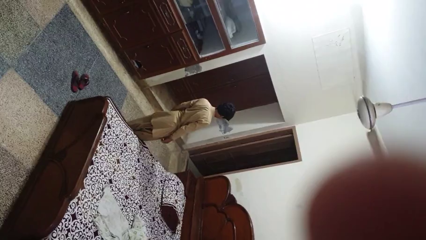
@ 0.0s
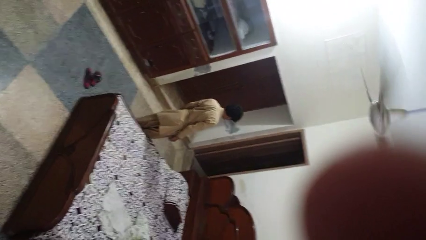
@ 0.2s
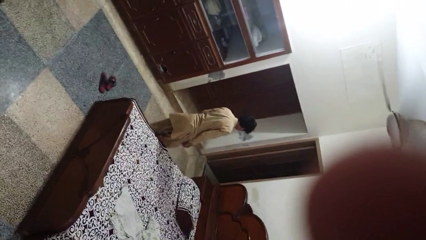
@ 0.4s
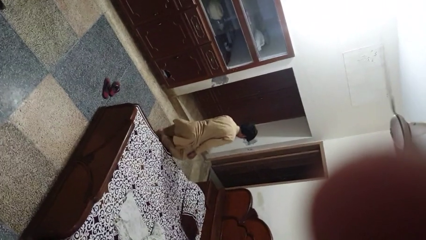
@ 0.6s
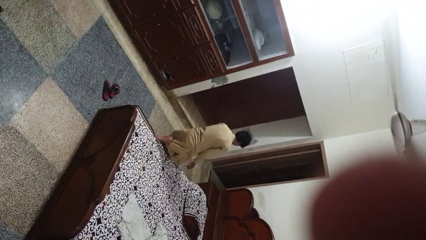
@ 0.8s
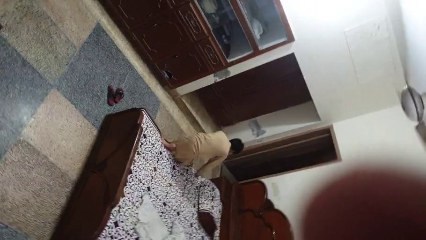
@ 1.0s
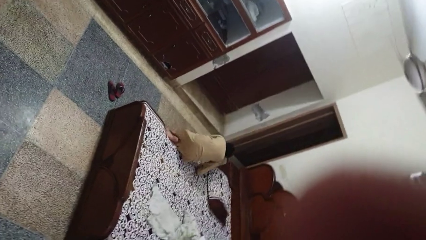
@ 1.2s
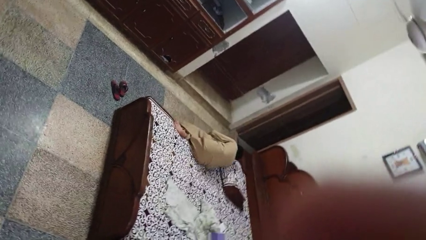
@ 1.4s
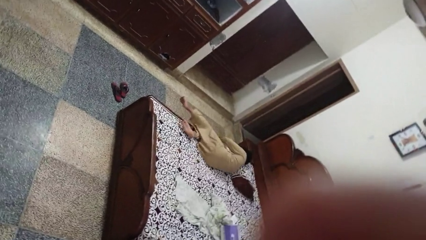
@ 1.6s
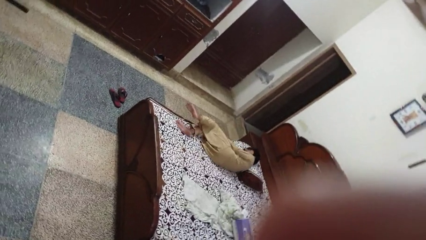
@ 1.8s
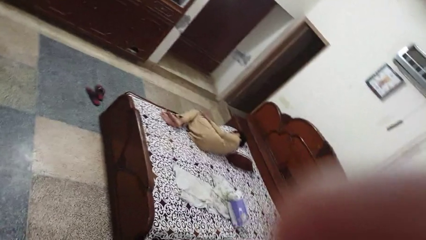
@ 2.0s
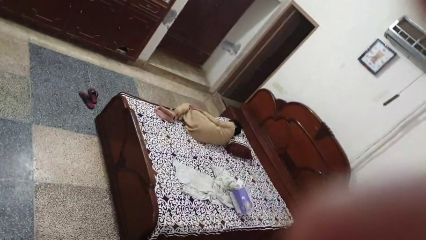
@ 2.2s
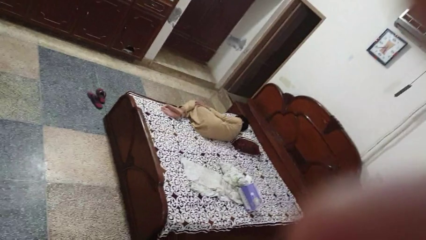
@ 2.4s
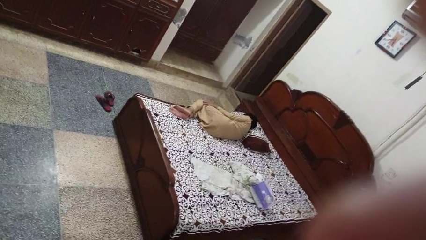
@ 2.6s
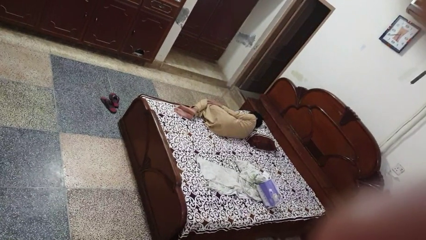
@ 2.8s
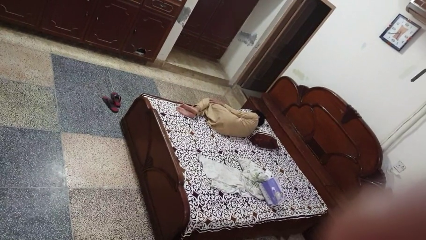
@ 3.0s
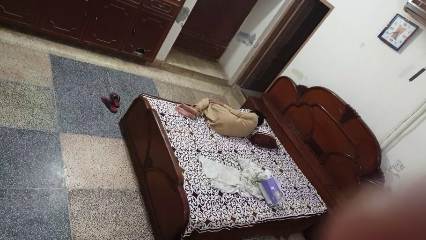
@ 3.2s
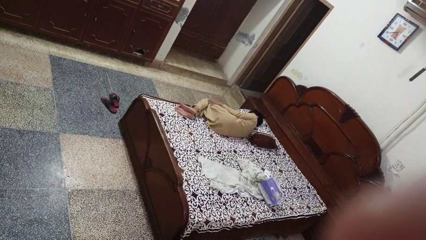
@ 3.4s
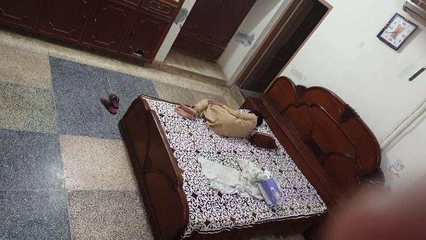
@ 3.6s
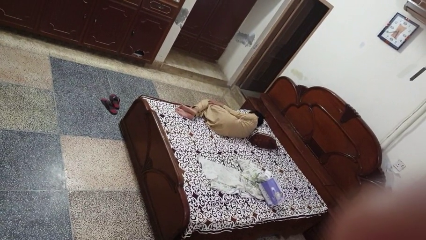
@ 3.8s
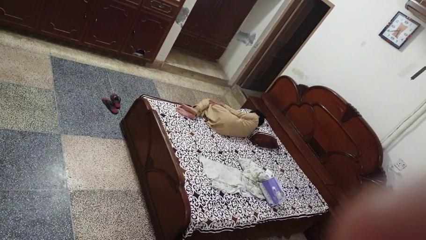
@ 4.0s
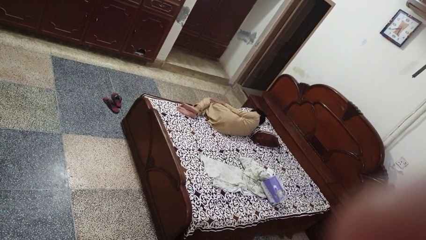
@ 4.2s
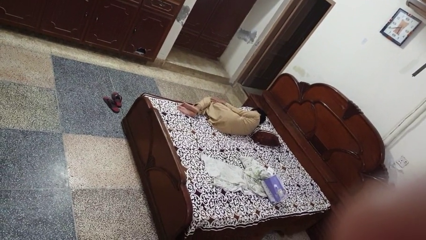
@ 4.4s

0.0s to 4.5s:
person lies down on bed

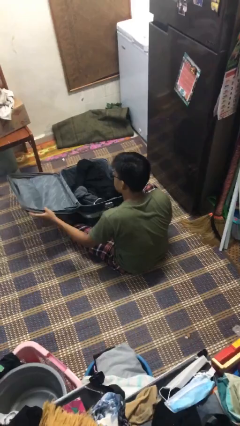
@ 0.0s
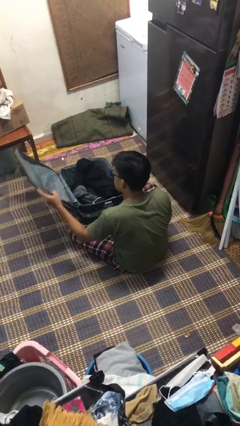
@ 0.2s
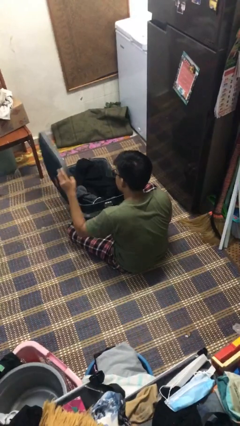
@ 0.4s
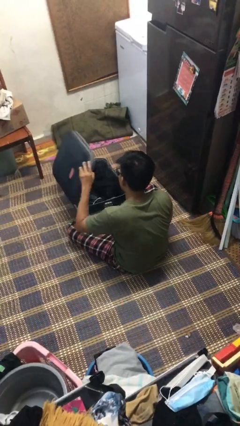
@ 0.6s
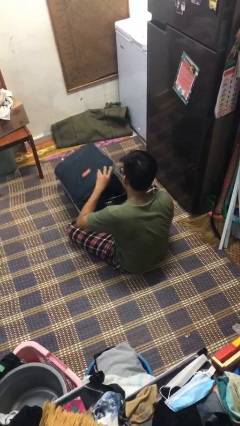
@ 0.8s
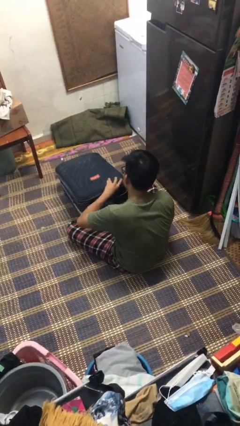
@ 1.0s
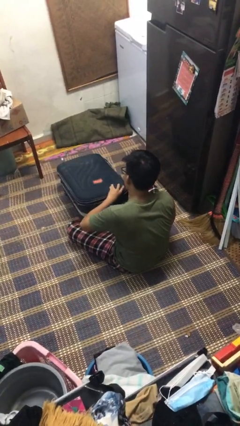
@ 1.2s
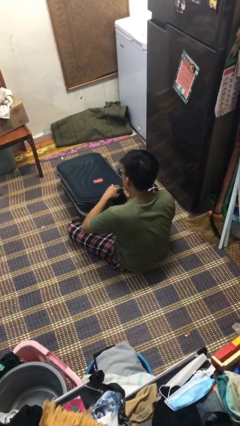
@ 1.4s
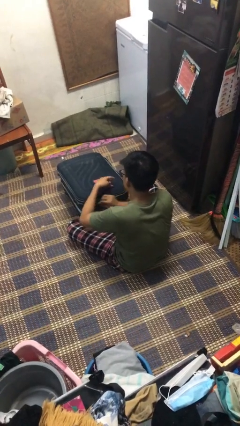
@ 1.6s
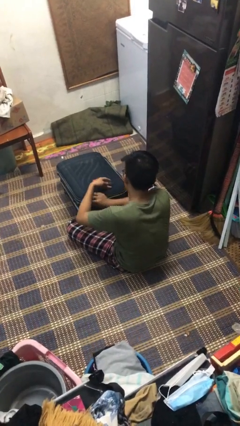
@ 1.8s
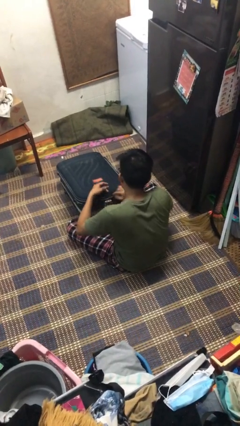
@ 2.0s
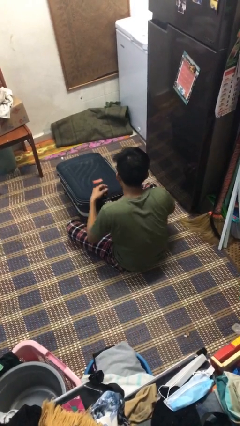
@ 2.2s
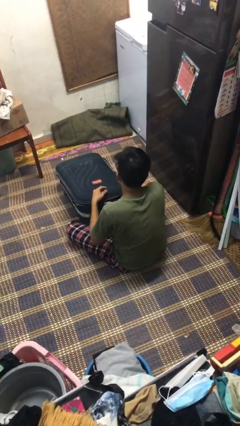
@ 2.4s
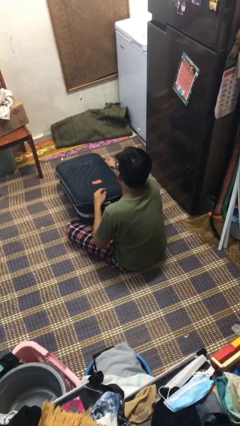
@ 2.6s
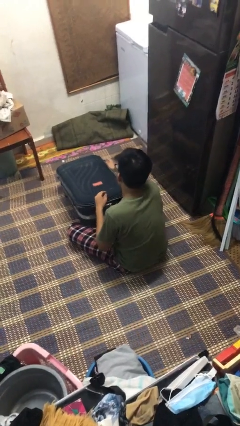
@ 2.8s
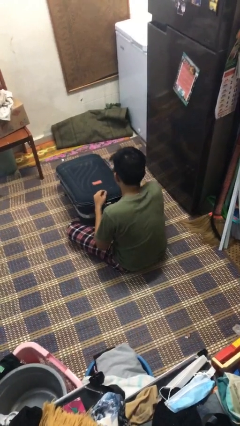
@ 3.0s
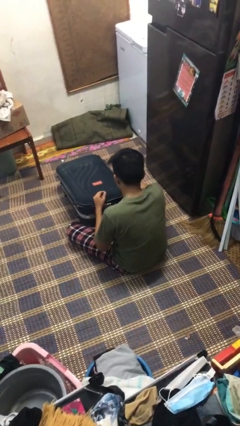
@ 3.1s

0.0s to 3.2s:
person closes suitcase

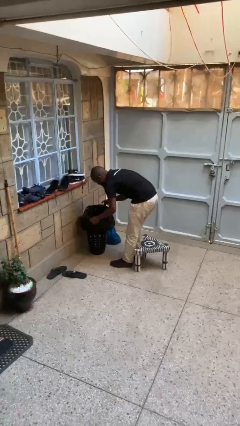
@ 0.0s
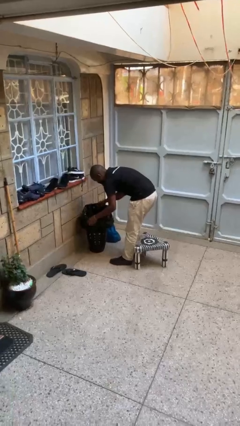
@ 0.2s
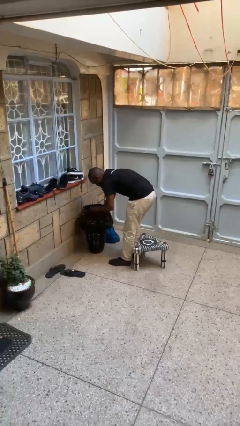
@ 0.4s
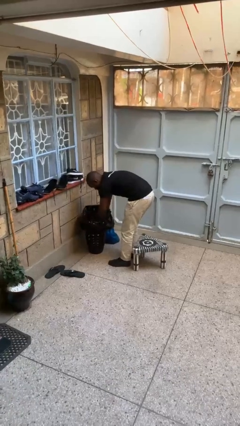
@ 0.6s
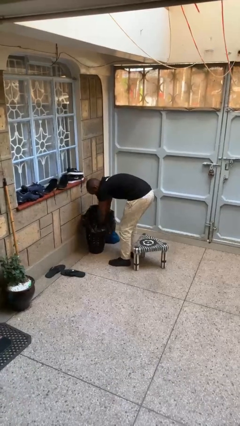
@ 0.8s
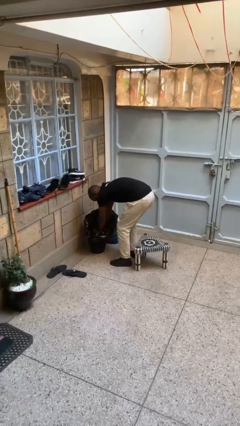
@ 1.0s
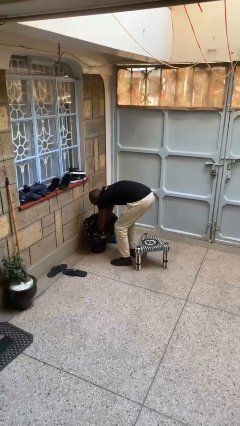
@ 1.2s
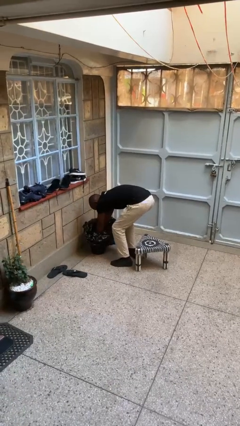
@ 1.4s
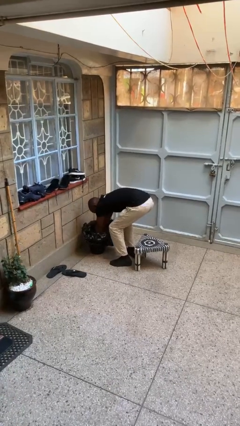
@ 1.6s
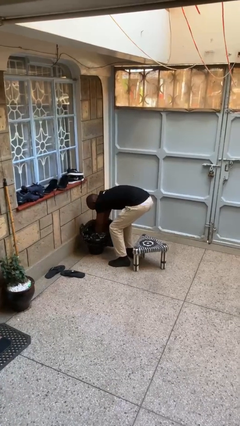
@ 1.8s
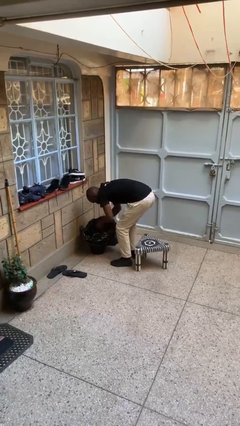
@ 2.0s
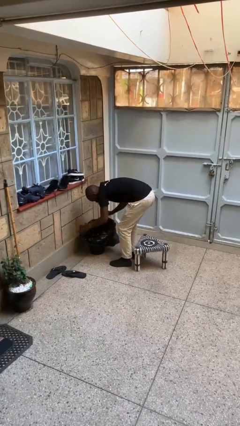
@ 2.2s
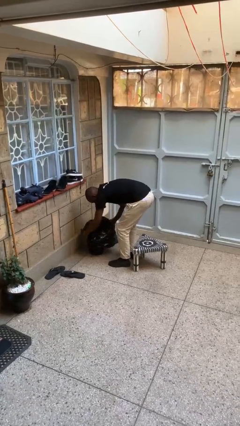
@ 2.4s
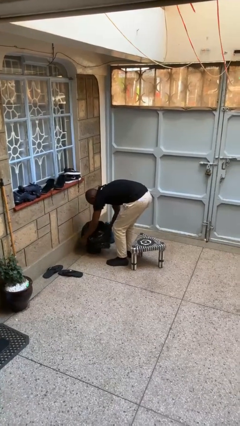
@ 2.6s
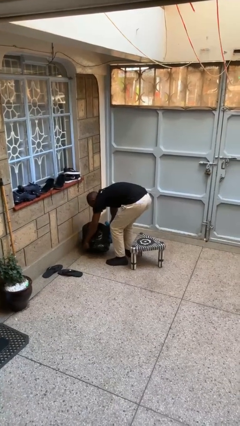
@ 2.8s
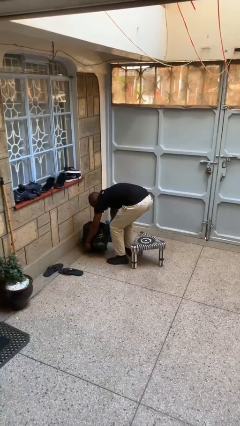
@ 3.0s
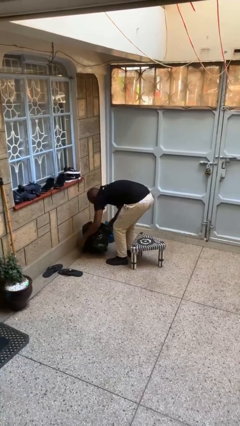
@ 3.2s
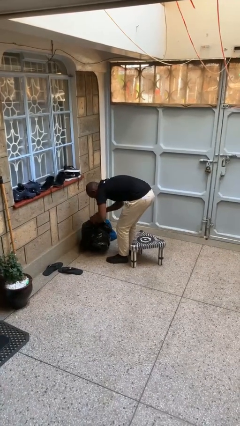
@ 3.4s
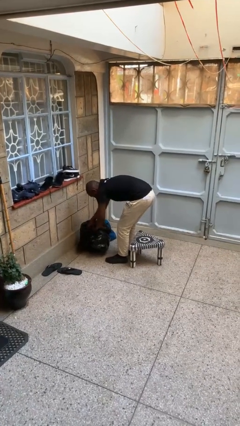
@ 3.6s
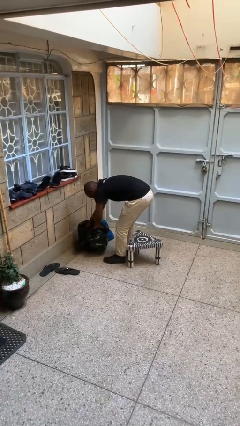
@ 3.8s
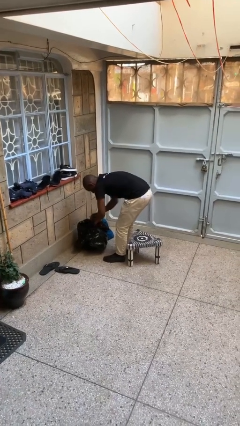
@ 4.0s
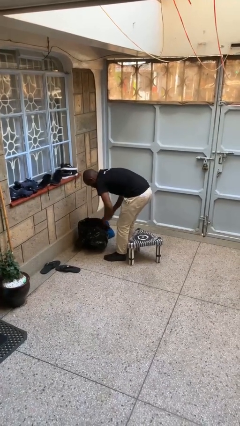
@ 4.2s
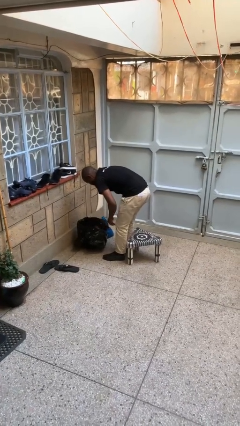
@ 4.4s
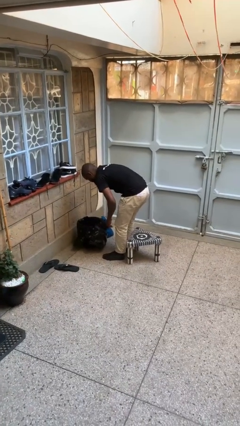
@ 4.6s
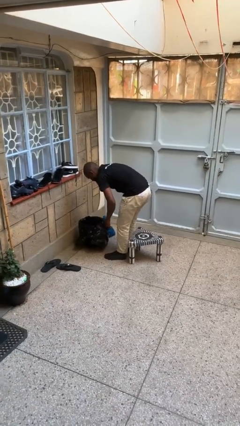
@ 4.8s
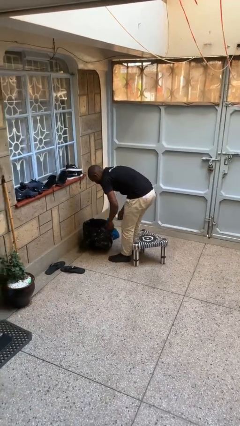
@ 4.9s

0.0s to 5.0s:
person inserts trashbag into trashcan

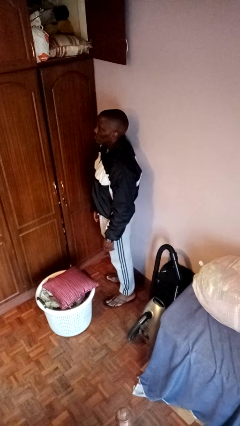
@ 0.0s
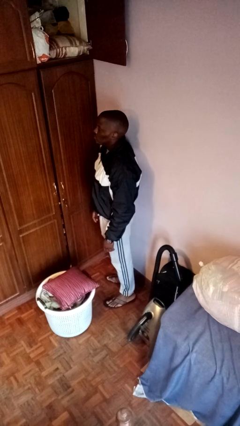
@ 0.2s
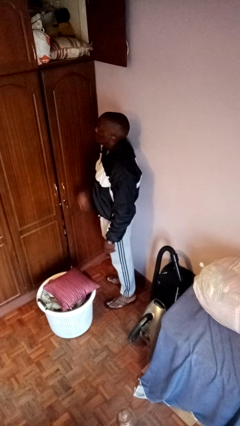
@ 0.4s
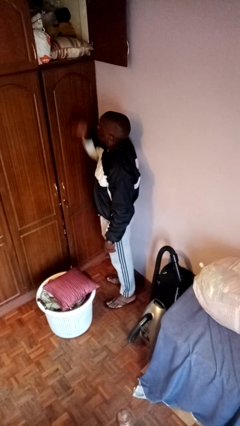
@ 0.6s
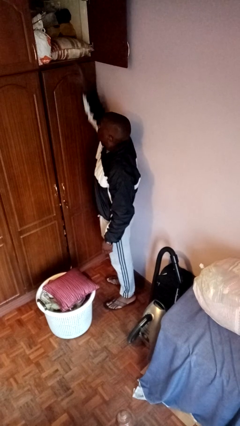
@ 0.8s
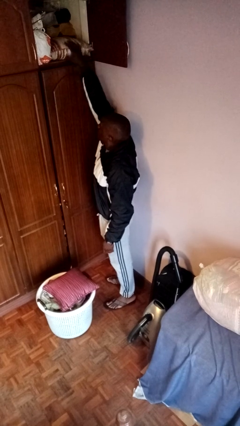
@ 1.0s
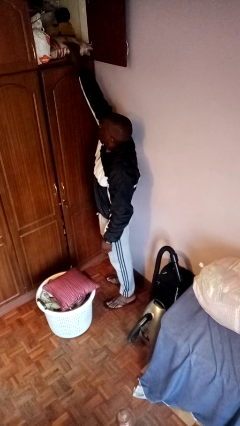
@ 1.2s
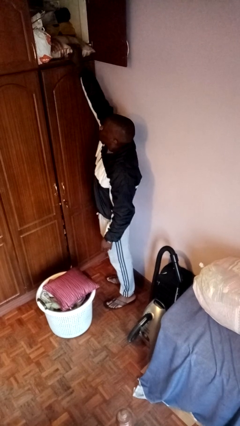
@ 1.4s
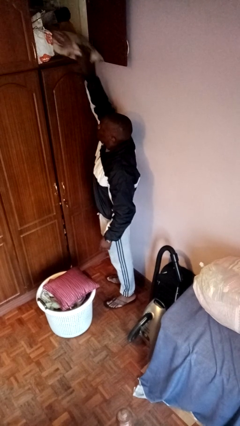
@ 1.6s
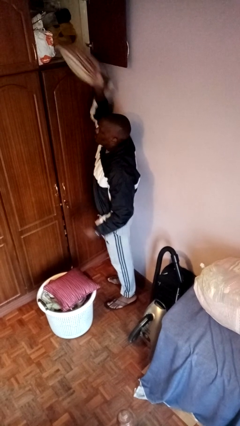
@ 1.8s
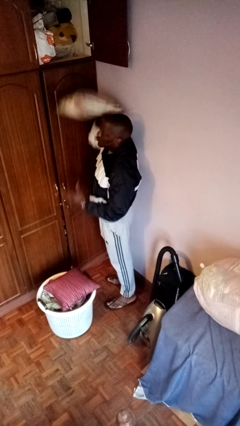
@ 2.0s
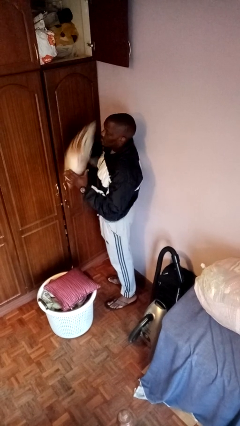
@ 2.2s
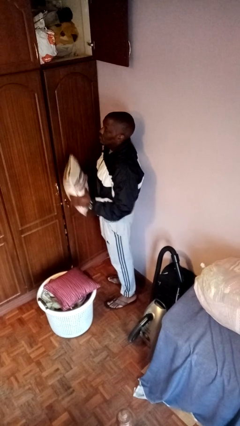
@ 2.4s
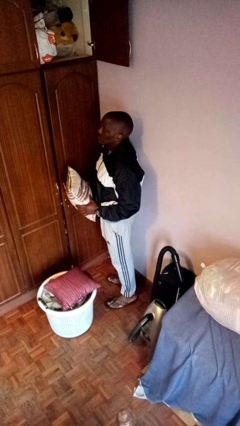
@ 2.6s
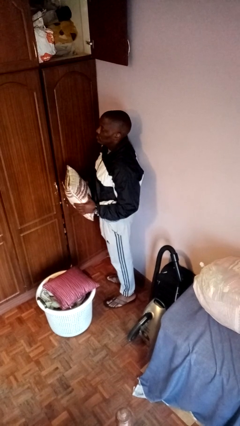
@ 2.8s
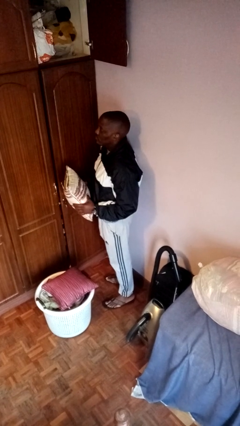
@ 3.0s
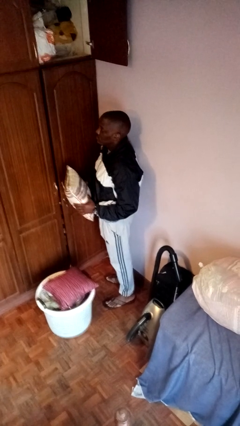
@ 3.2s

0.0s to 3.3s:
person picks up object from shelf

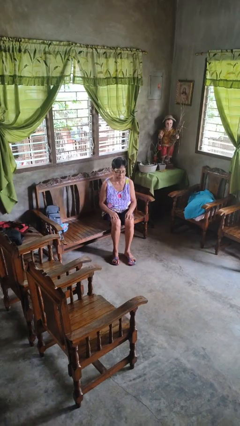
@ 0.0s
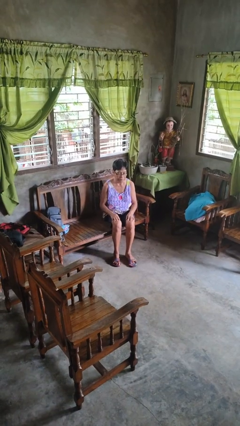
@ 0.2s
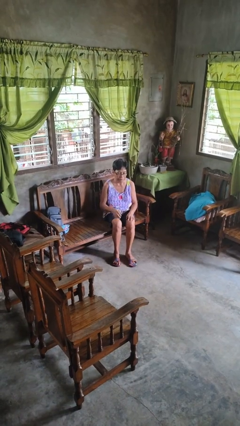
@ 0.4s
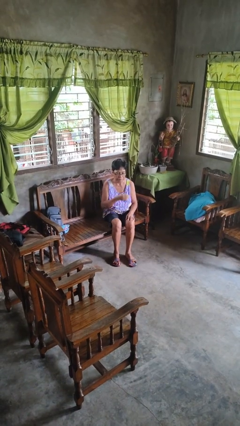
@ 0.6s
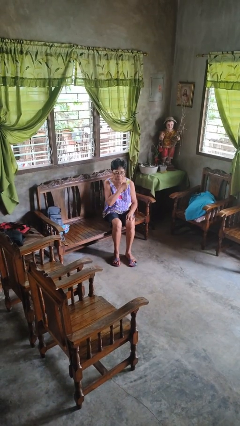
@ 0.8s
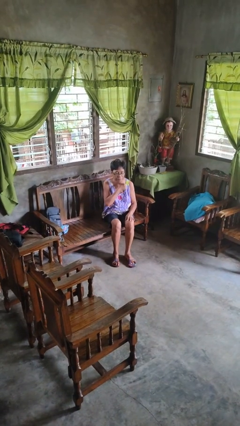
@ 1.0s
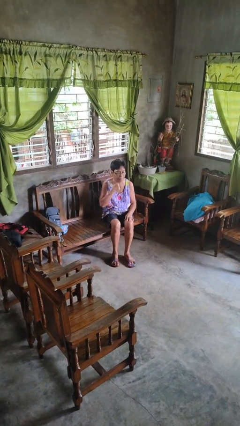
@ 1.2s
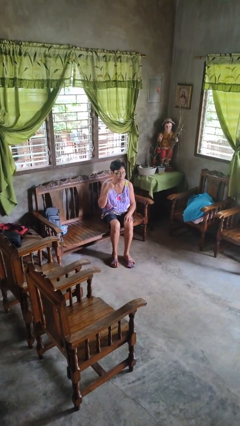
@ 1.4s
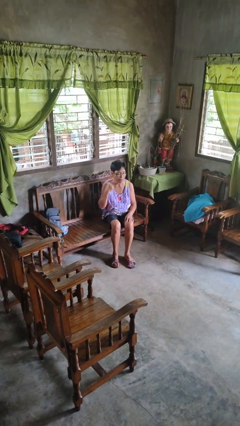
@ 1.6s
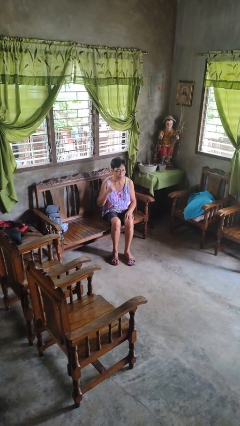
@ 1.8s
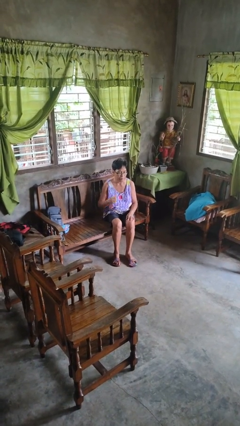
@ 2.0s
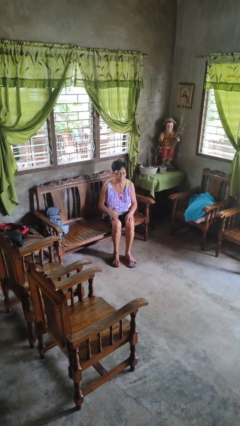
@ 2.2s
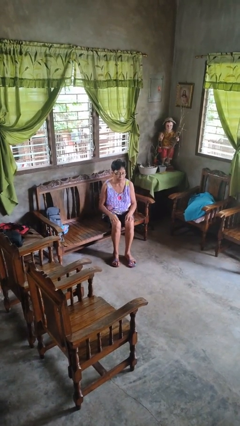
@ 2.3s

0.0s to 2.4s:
person gestures cut
